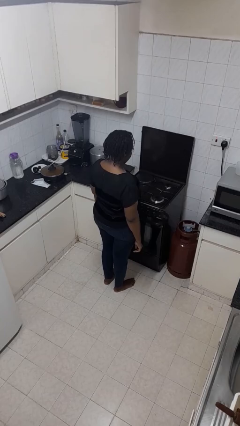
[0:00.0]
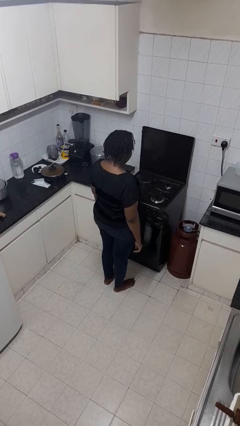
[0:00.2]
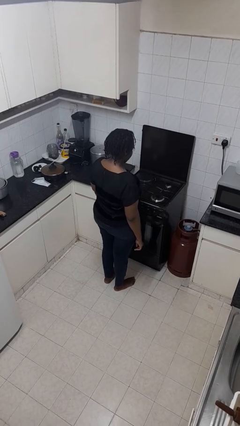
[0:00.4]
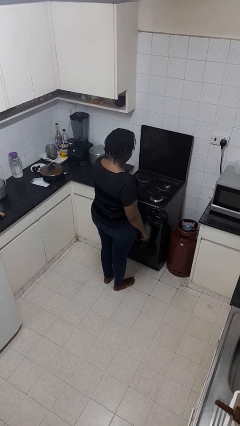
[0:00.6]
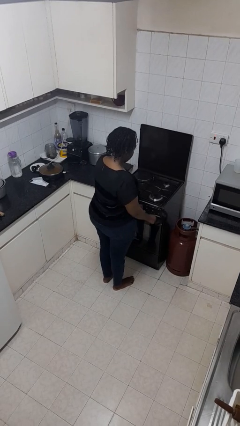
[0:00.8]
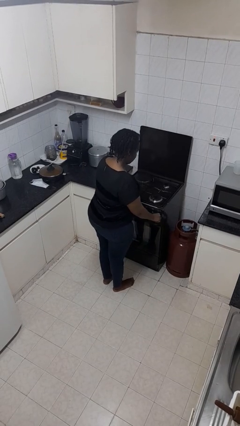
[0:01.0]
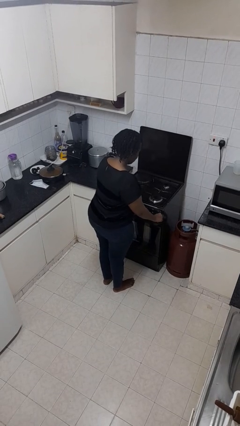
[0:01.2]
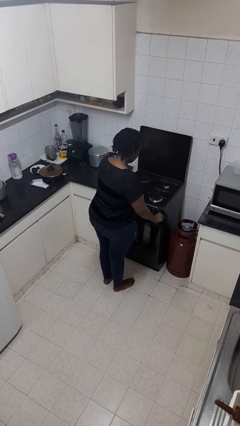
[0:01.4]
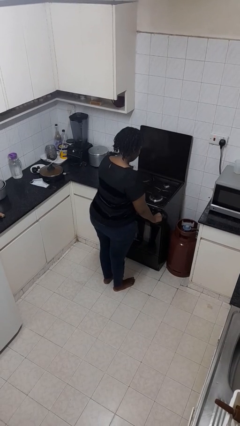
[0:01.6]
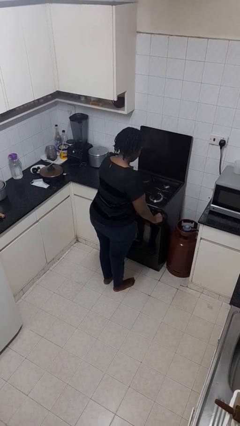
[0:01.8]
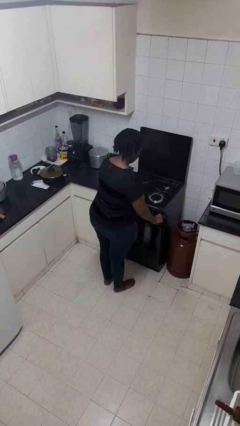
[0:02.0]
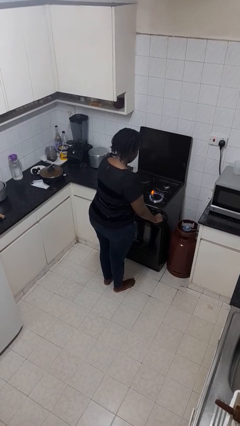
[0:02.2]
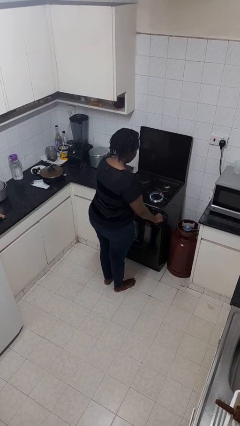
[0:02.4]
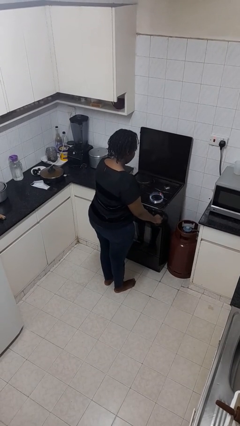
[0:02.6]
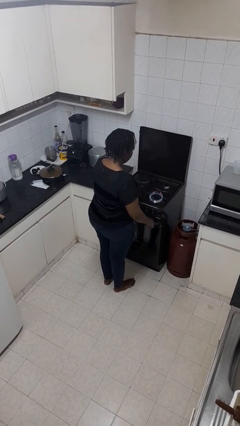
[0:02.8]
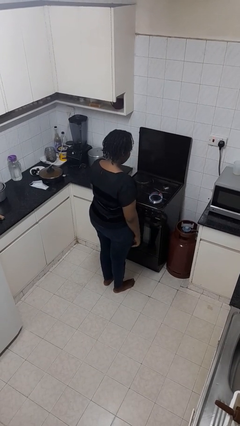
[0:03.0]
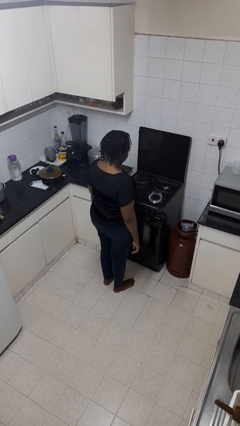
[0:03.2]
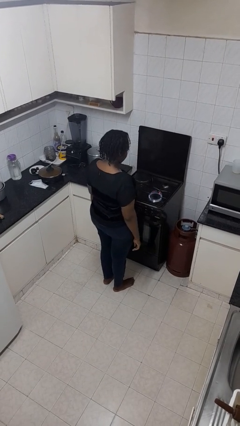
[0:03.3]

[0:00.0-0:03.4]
person turns on stovetop

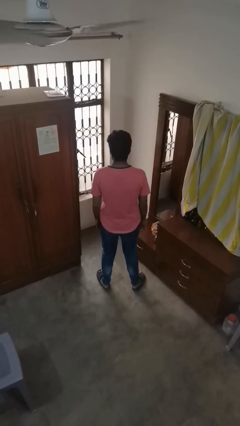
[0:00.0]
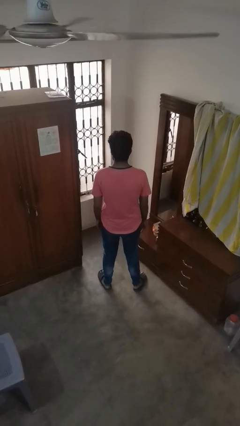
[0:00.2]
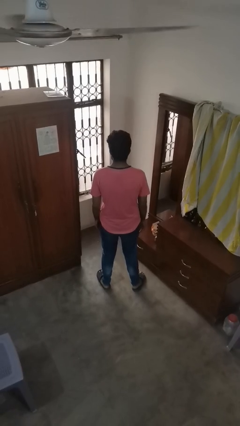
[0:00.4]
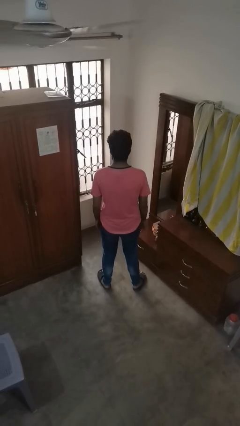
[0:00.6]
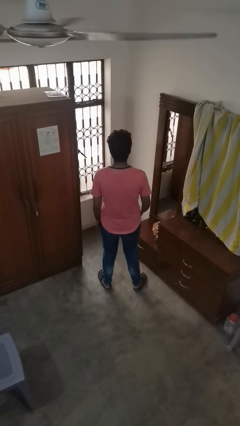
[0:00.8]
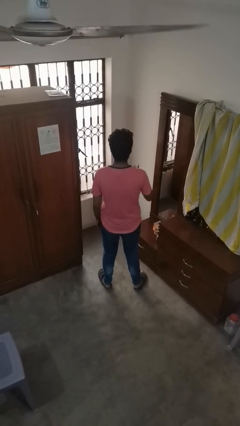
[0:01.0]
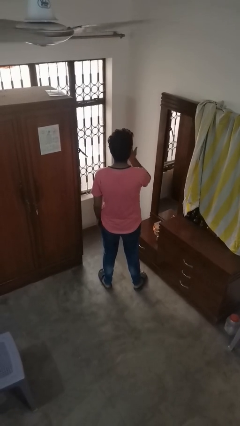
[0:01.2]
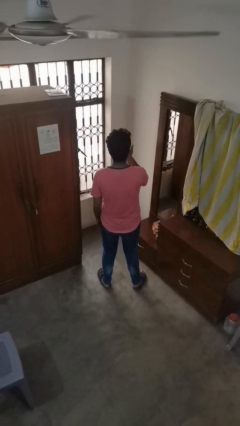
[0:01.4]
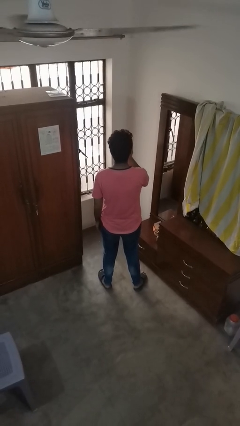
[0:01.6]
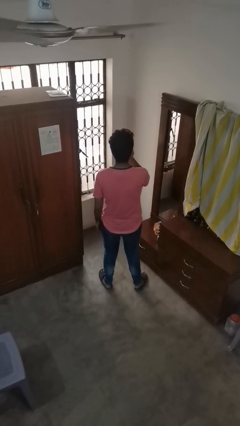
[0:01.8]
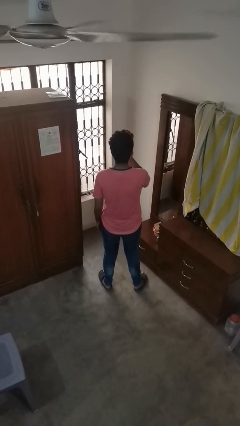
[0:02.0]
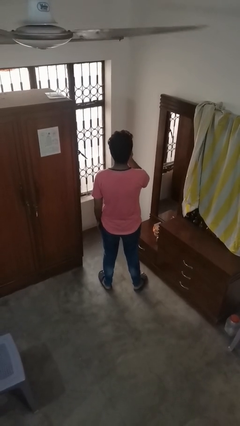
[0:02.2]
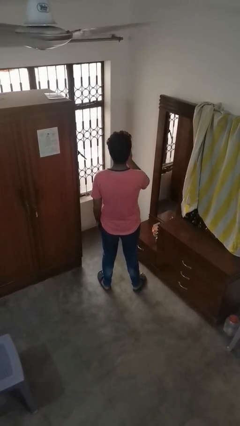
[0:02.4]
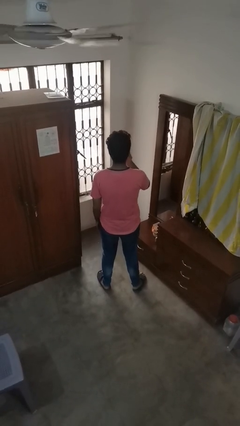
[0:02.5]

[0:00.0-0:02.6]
person licks fingers

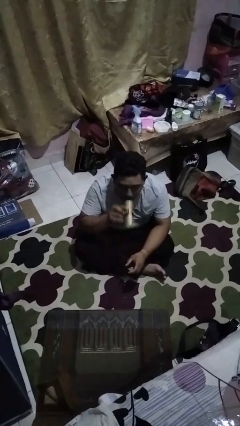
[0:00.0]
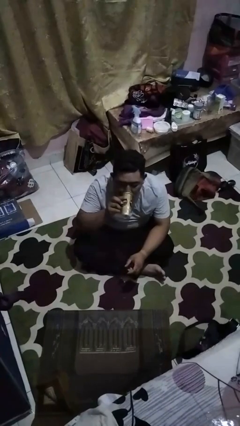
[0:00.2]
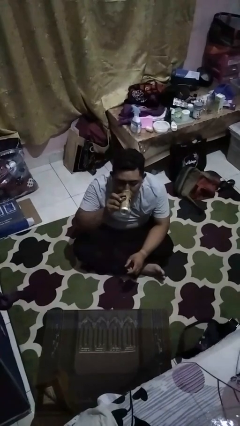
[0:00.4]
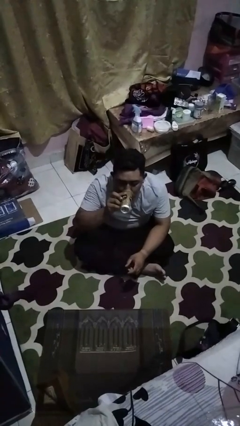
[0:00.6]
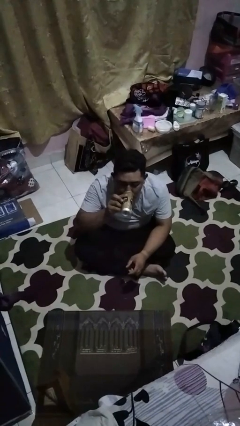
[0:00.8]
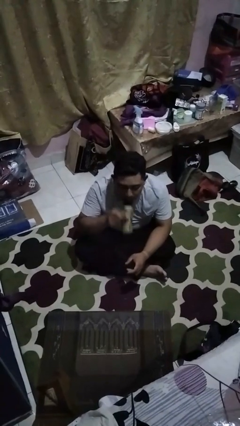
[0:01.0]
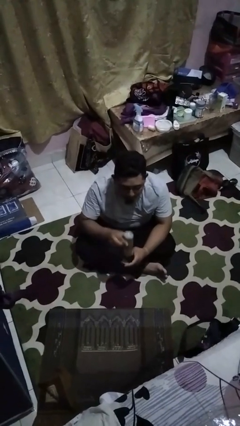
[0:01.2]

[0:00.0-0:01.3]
person drinks from beverage can

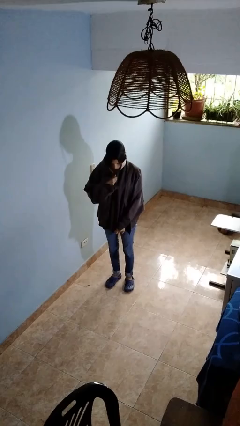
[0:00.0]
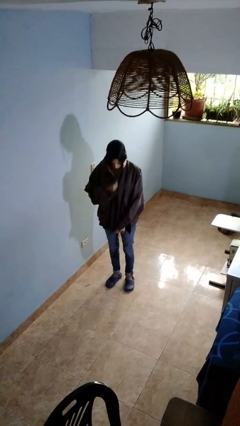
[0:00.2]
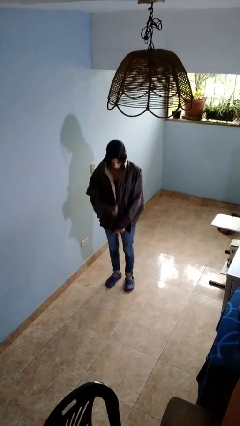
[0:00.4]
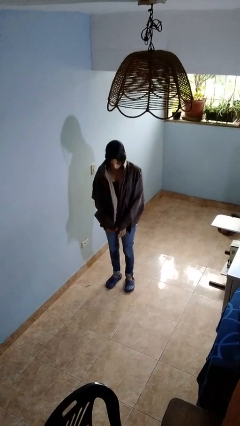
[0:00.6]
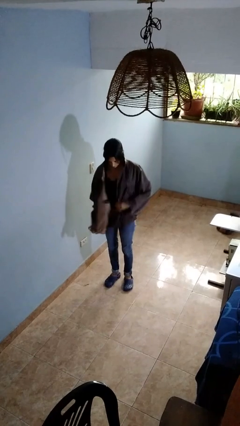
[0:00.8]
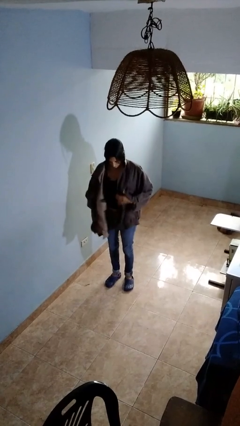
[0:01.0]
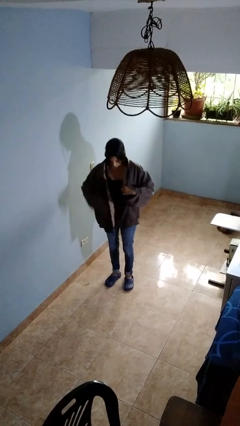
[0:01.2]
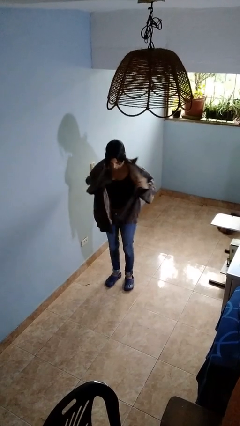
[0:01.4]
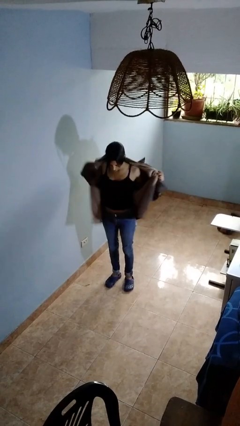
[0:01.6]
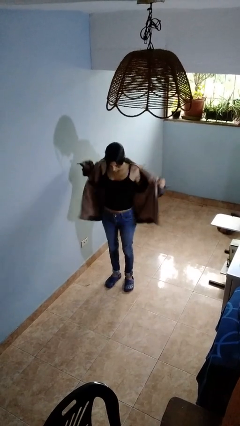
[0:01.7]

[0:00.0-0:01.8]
person unzips jacket

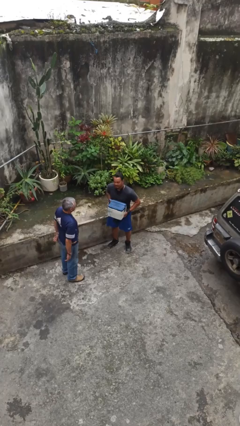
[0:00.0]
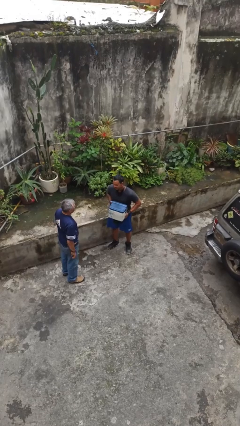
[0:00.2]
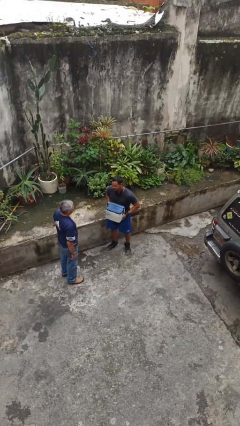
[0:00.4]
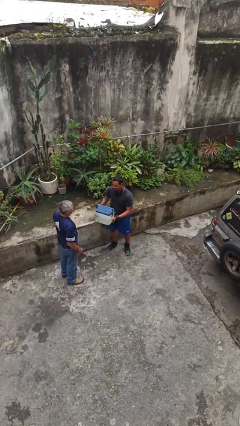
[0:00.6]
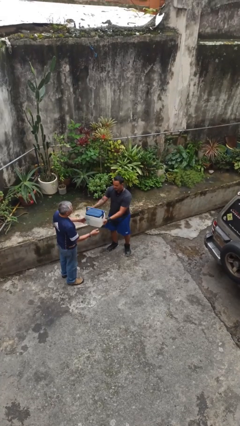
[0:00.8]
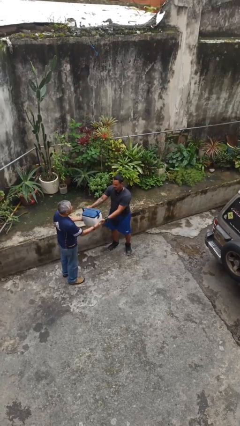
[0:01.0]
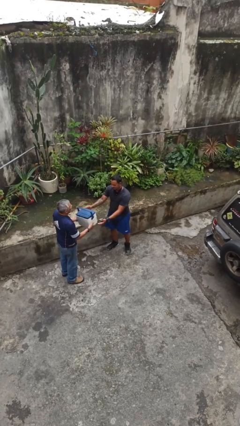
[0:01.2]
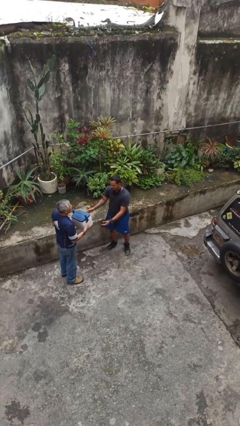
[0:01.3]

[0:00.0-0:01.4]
person transfers object to person

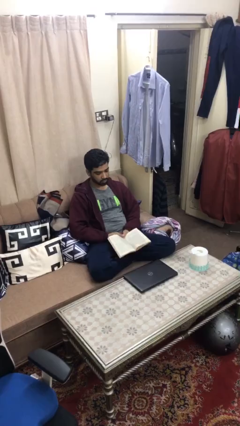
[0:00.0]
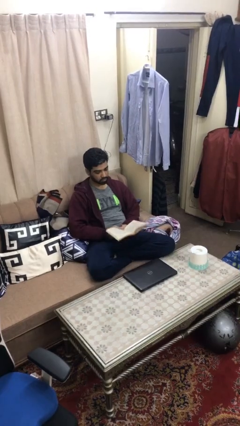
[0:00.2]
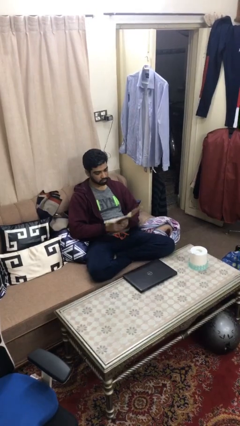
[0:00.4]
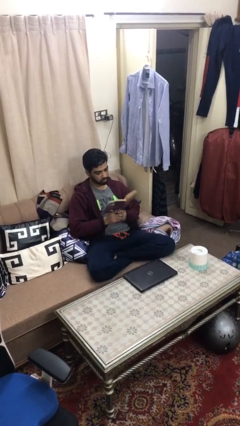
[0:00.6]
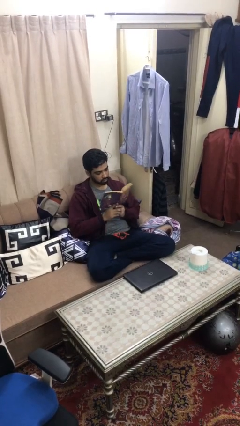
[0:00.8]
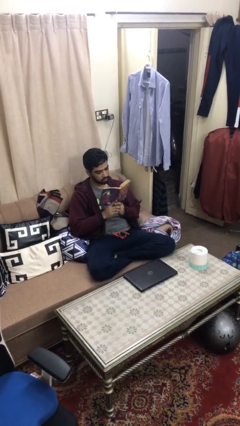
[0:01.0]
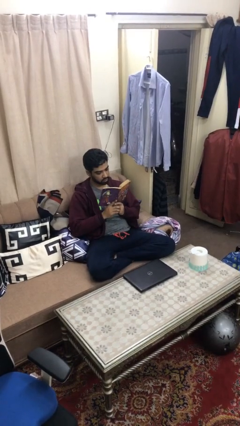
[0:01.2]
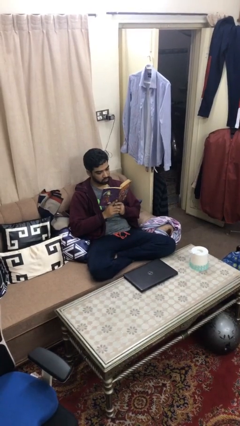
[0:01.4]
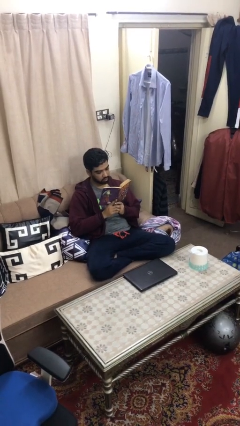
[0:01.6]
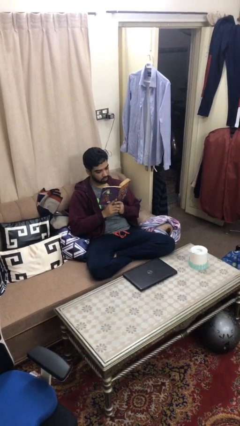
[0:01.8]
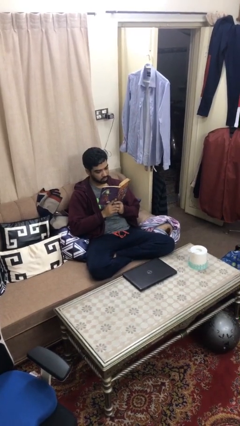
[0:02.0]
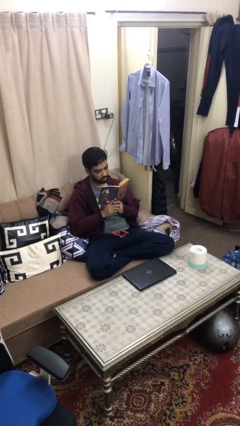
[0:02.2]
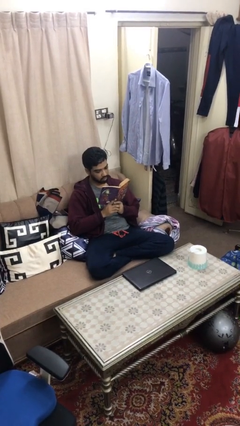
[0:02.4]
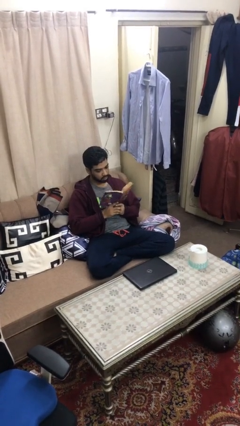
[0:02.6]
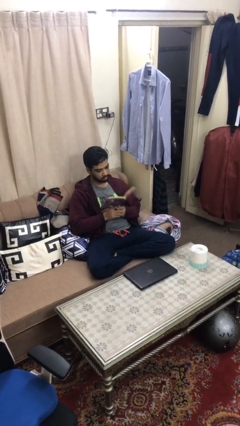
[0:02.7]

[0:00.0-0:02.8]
person reads document

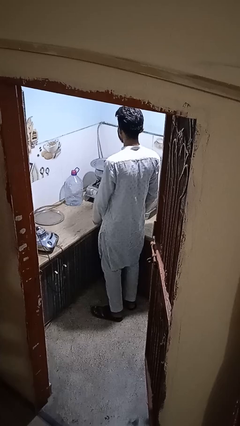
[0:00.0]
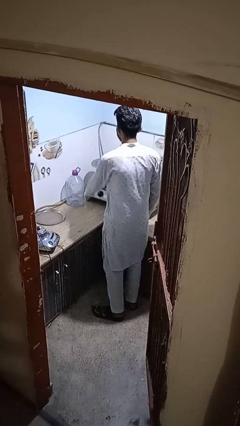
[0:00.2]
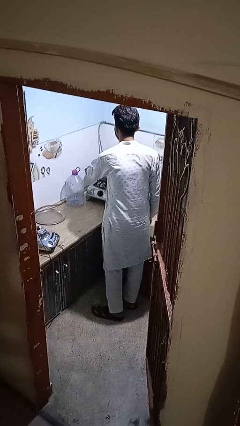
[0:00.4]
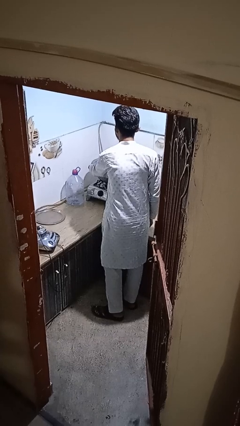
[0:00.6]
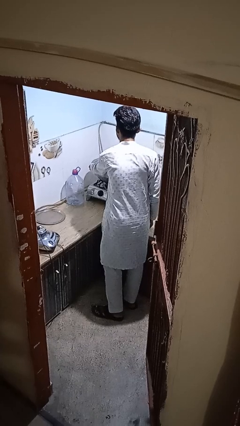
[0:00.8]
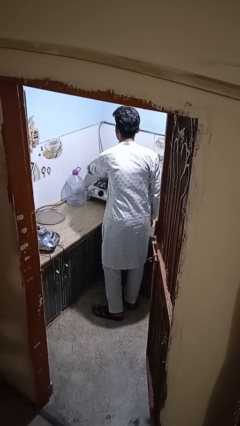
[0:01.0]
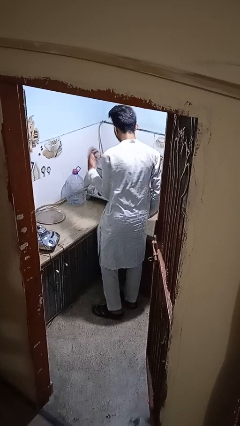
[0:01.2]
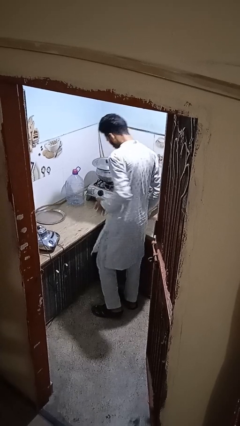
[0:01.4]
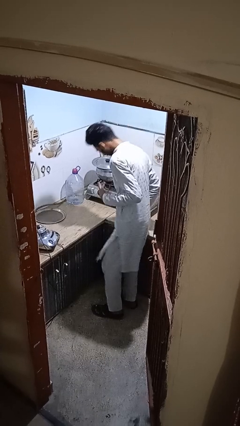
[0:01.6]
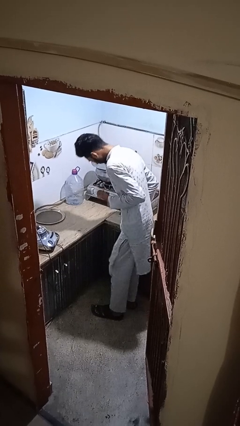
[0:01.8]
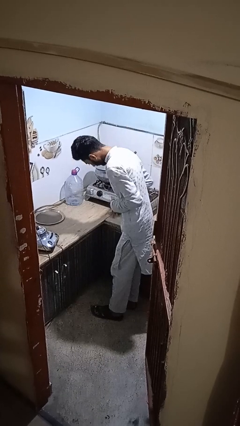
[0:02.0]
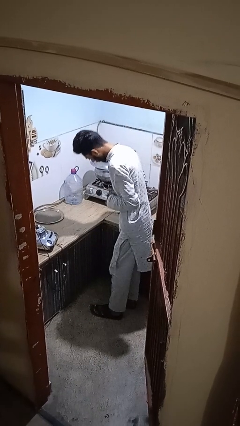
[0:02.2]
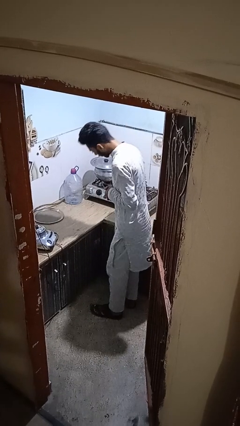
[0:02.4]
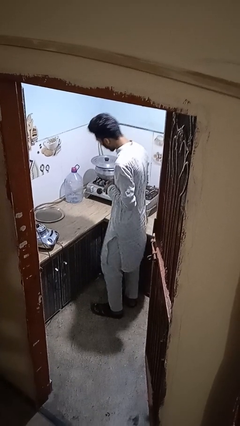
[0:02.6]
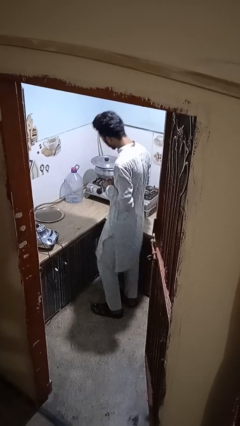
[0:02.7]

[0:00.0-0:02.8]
person burns hand

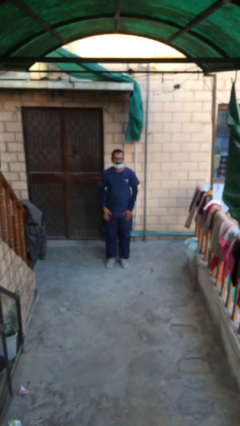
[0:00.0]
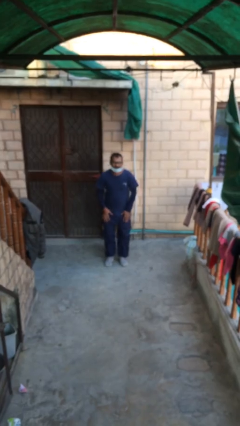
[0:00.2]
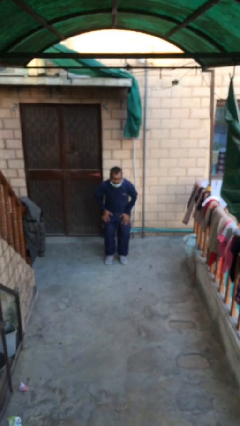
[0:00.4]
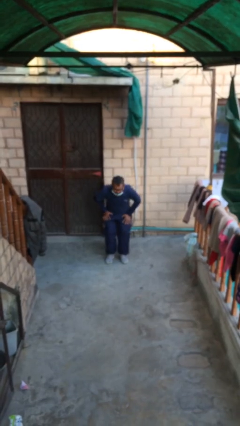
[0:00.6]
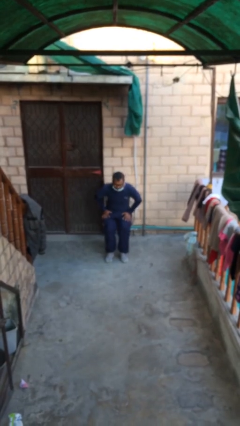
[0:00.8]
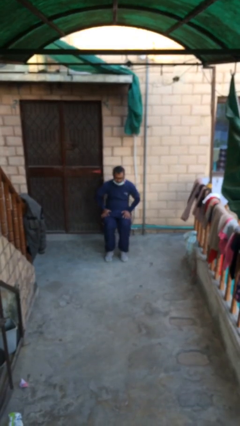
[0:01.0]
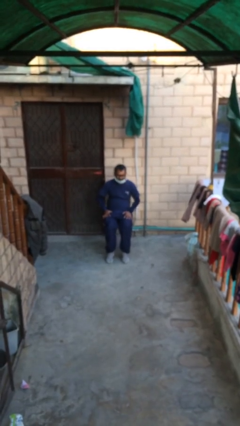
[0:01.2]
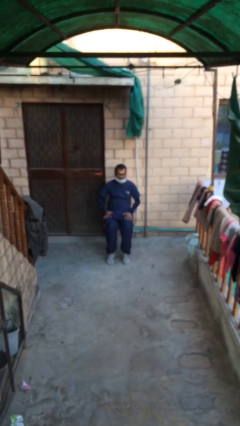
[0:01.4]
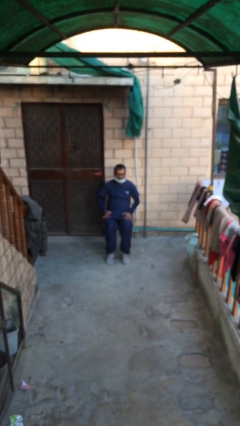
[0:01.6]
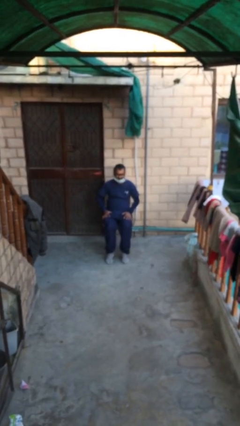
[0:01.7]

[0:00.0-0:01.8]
person sits down
